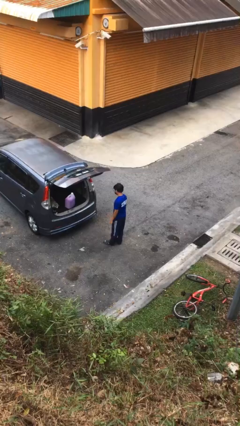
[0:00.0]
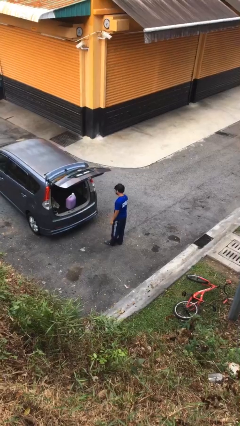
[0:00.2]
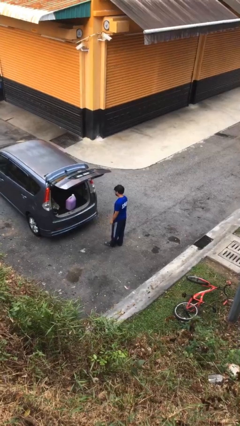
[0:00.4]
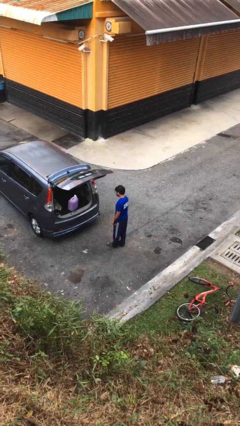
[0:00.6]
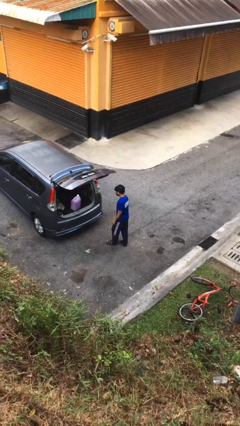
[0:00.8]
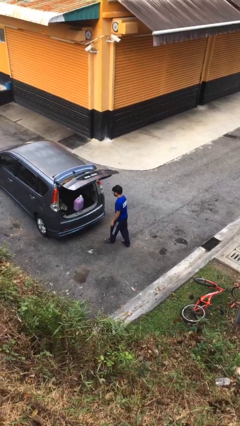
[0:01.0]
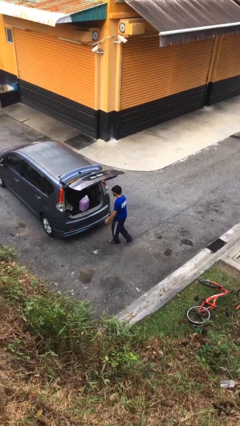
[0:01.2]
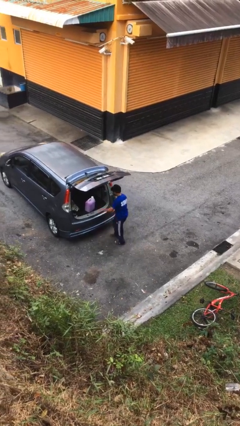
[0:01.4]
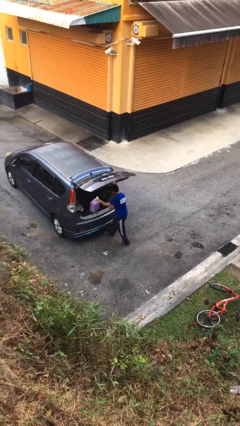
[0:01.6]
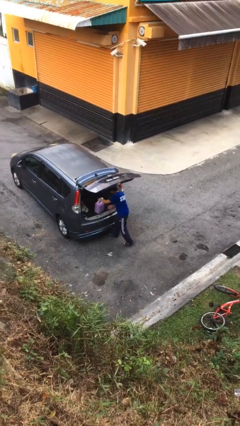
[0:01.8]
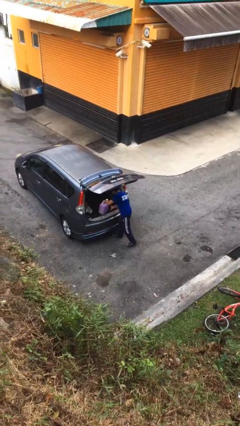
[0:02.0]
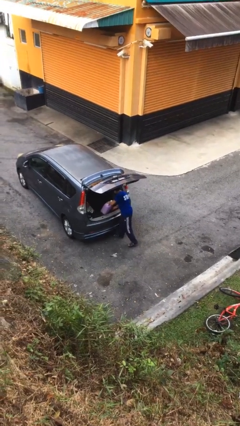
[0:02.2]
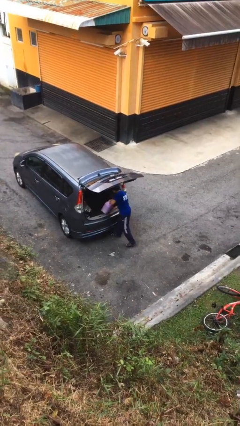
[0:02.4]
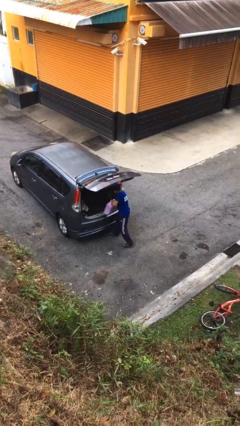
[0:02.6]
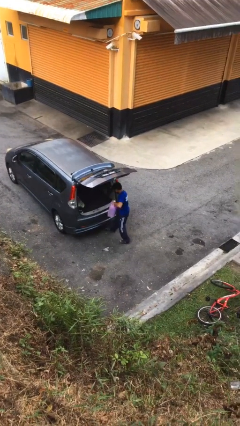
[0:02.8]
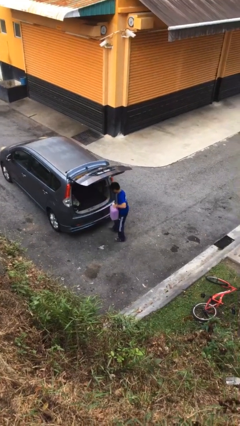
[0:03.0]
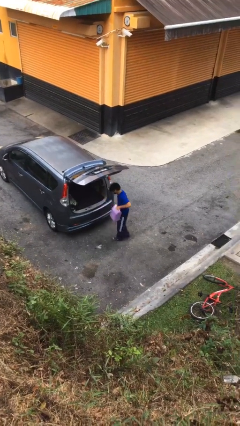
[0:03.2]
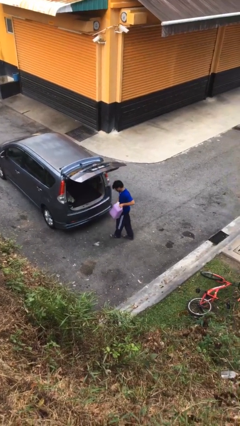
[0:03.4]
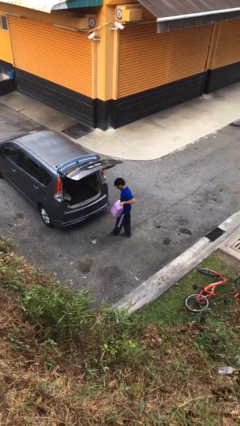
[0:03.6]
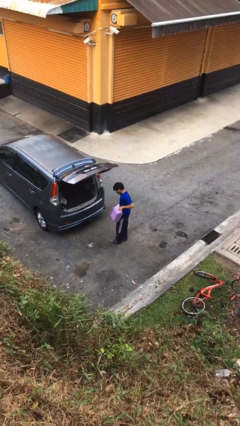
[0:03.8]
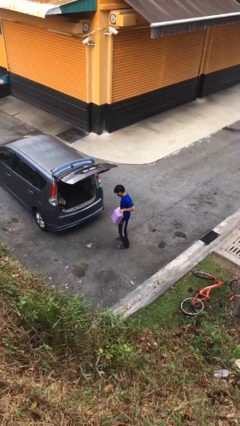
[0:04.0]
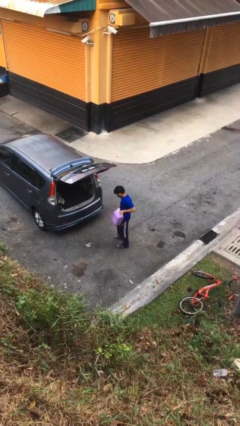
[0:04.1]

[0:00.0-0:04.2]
person unloads car

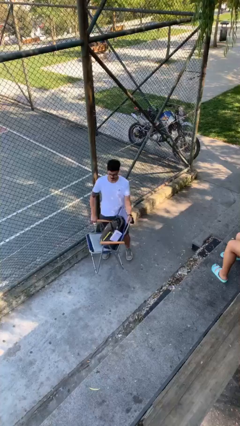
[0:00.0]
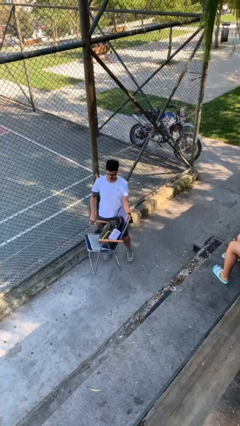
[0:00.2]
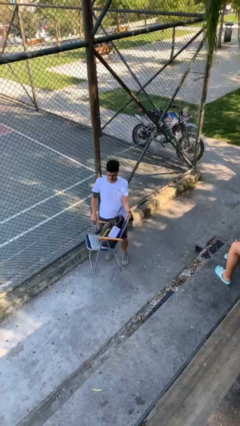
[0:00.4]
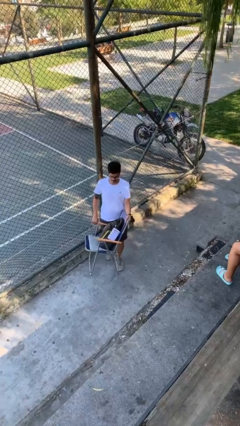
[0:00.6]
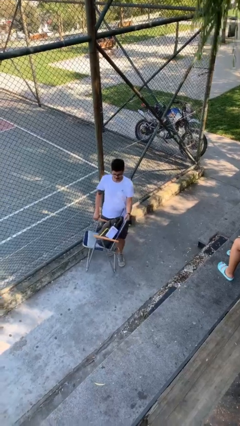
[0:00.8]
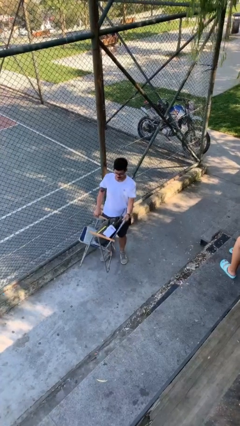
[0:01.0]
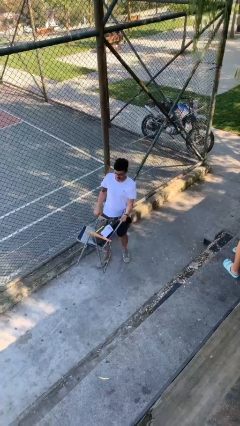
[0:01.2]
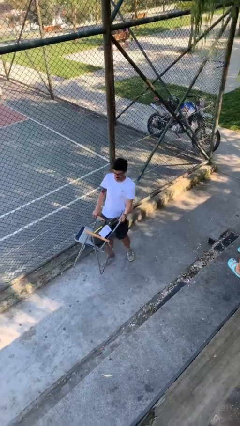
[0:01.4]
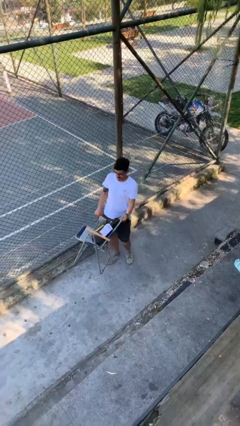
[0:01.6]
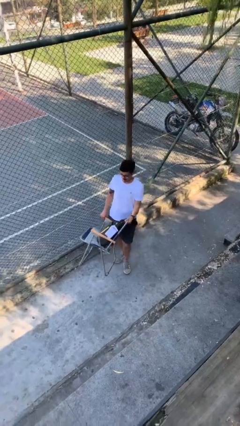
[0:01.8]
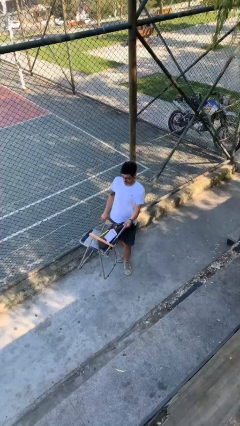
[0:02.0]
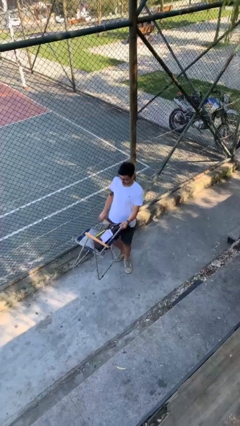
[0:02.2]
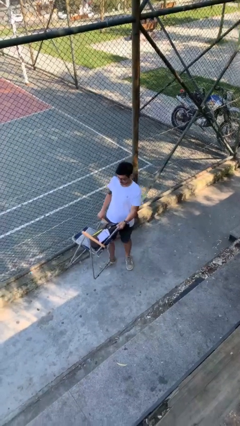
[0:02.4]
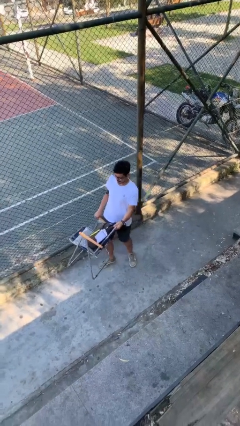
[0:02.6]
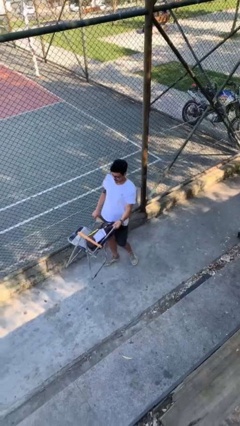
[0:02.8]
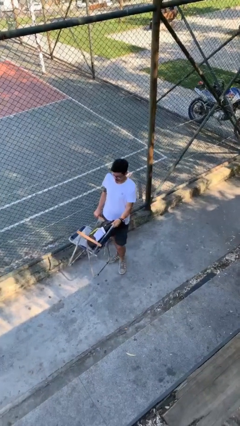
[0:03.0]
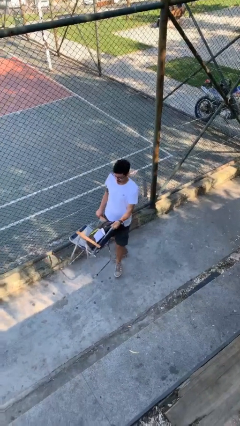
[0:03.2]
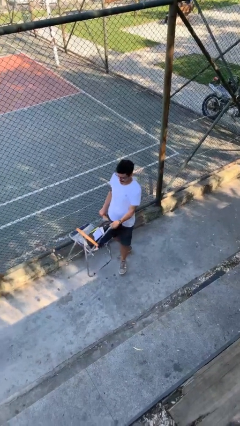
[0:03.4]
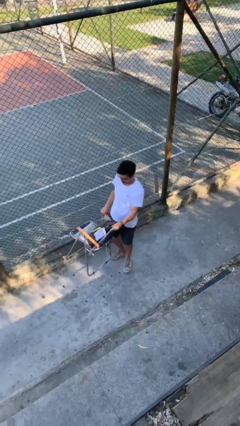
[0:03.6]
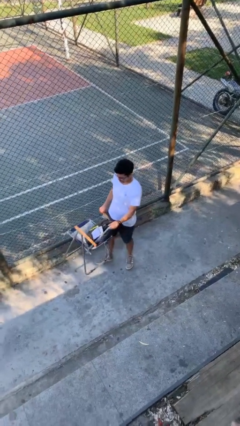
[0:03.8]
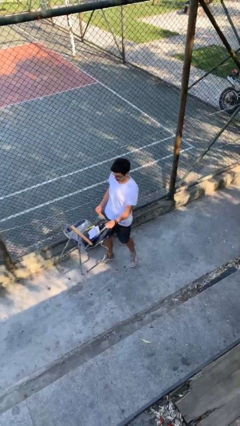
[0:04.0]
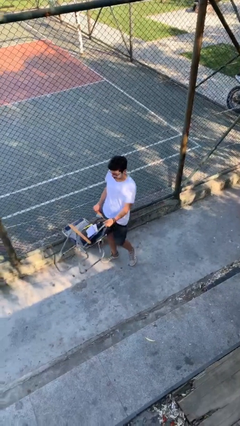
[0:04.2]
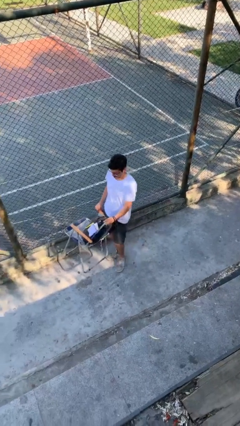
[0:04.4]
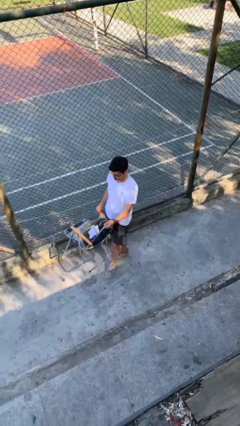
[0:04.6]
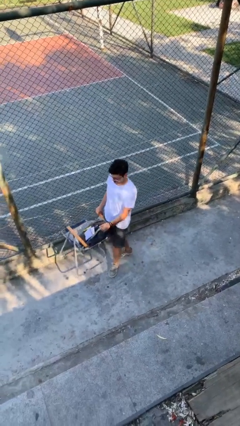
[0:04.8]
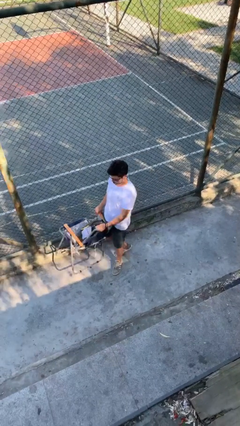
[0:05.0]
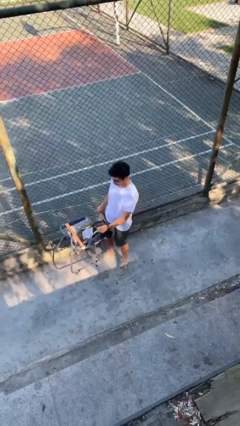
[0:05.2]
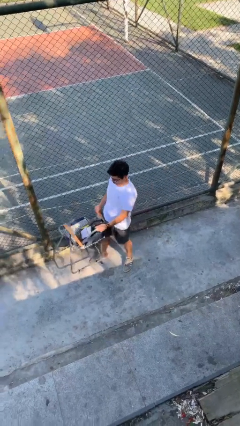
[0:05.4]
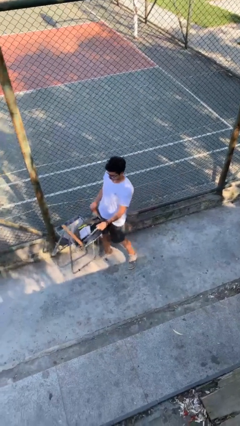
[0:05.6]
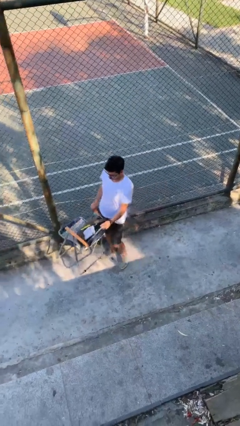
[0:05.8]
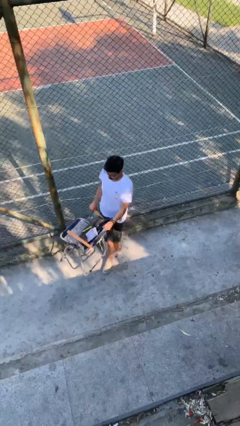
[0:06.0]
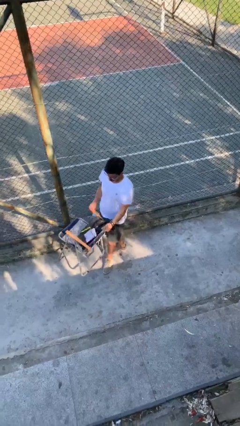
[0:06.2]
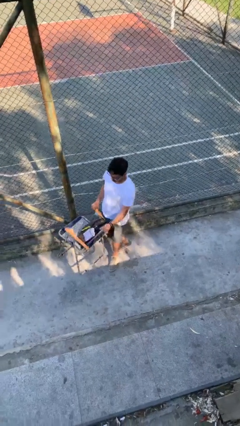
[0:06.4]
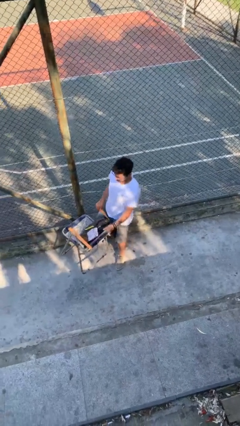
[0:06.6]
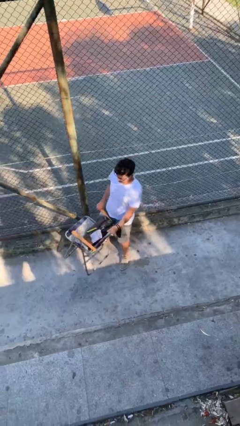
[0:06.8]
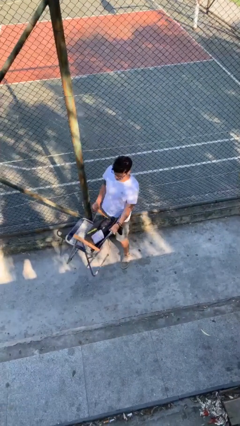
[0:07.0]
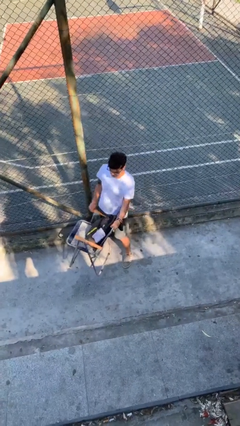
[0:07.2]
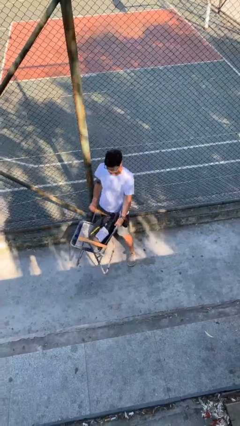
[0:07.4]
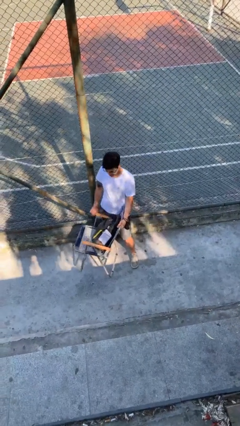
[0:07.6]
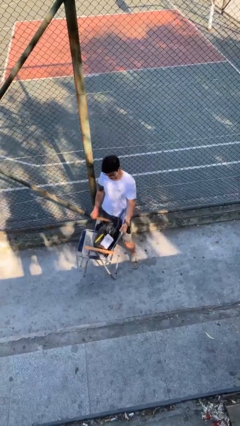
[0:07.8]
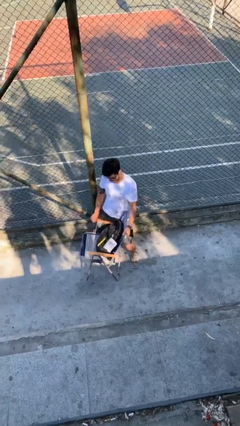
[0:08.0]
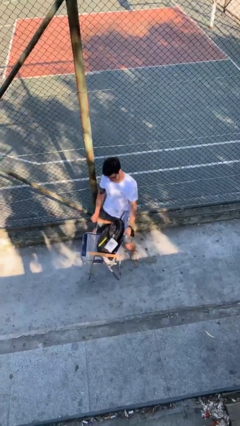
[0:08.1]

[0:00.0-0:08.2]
person carries heavy object

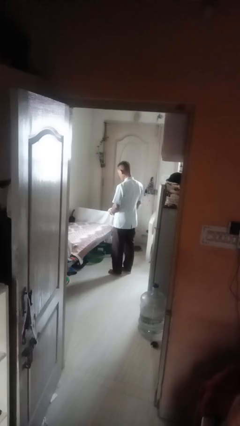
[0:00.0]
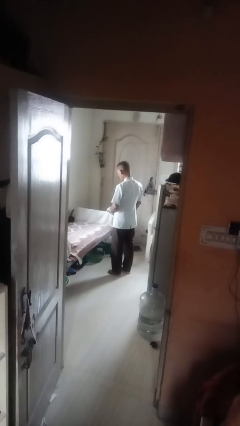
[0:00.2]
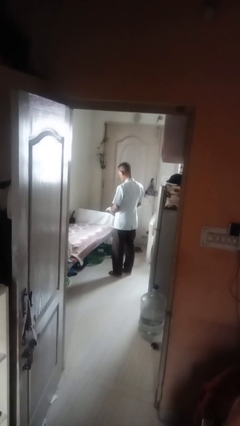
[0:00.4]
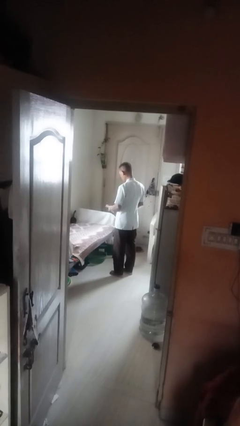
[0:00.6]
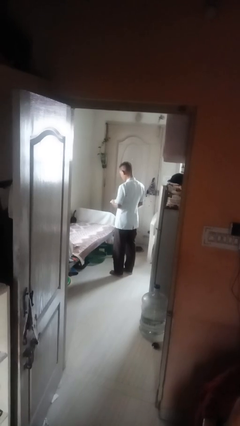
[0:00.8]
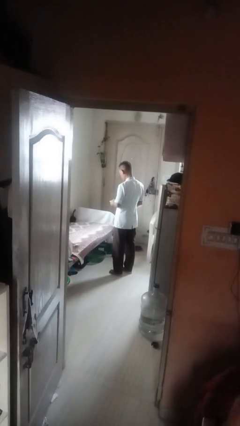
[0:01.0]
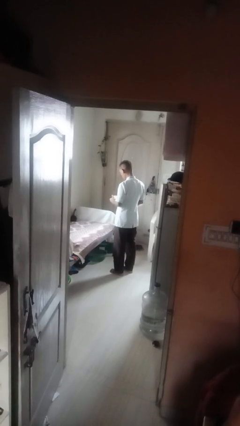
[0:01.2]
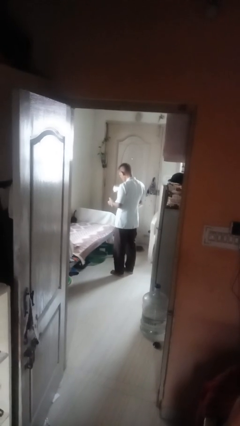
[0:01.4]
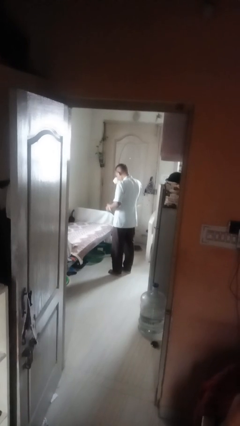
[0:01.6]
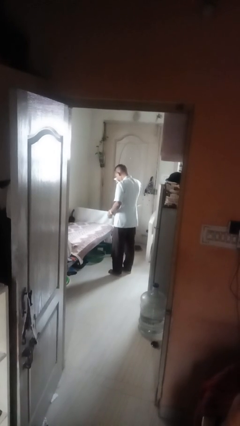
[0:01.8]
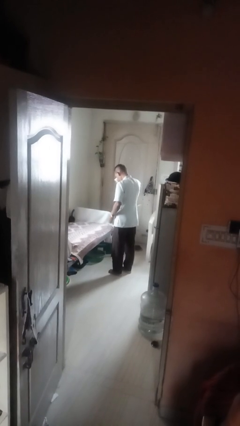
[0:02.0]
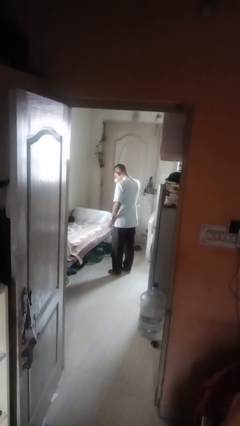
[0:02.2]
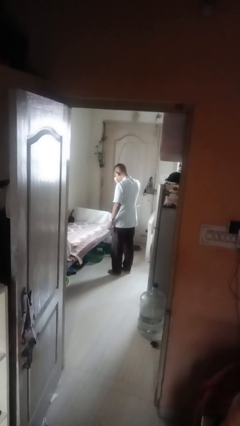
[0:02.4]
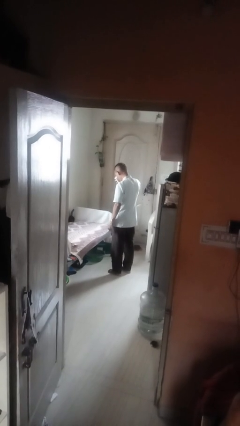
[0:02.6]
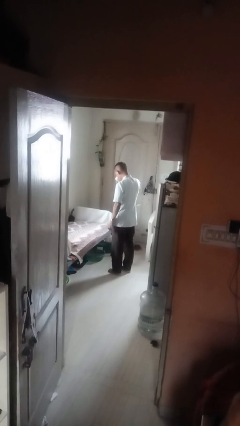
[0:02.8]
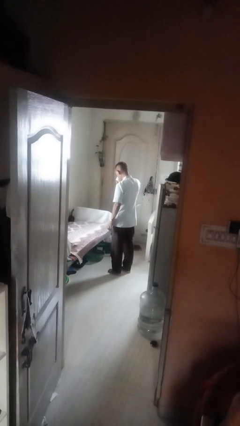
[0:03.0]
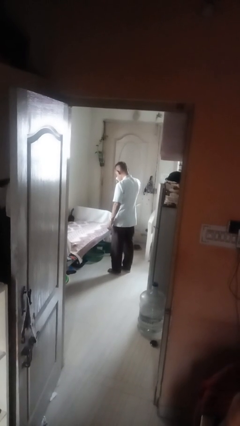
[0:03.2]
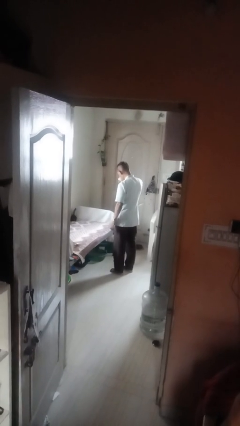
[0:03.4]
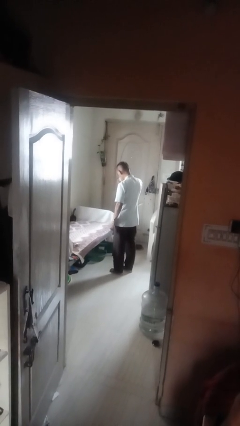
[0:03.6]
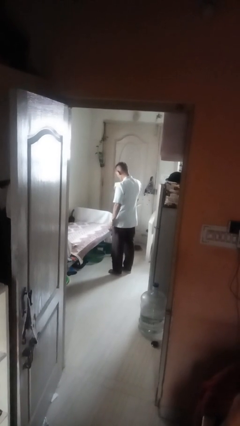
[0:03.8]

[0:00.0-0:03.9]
person blows nose

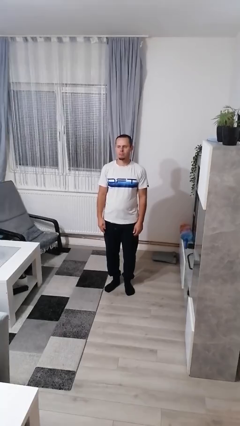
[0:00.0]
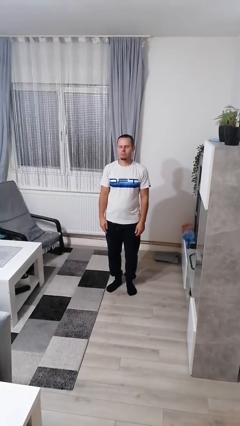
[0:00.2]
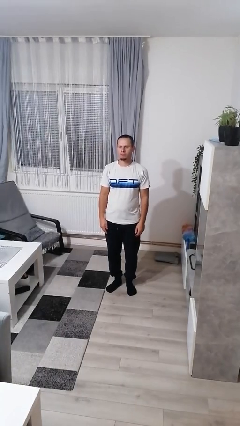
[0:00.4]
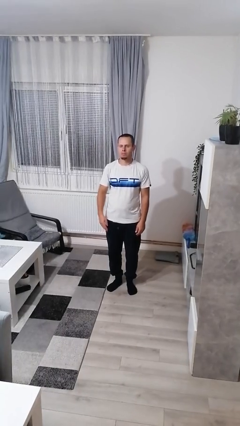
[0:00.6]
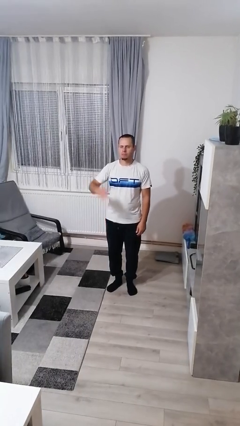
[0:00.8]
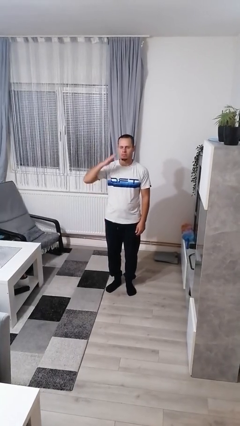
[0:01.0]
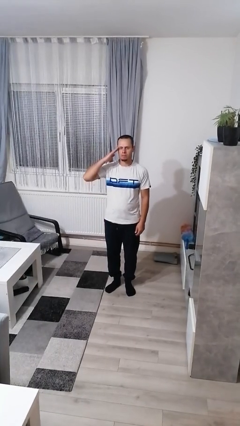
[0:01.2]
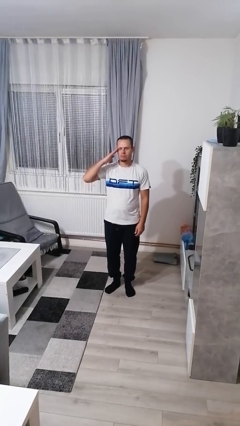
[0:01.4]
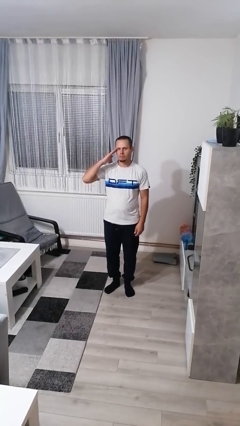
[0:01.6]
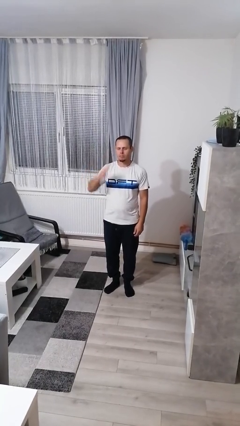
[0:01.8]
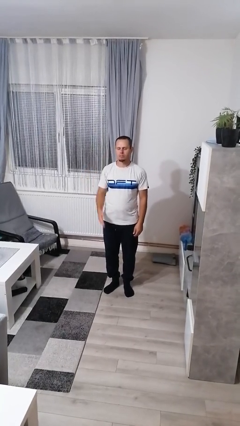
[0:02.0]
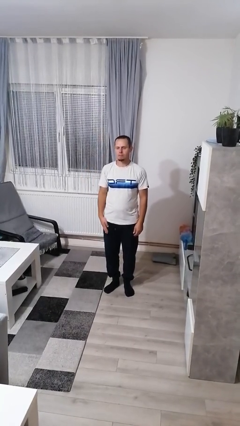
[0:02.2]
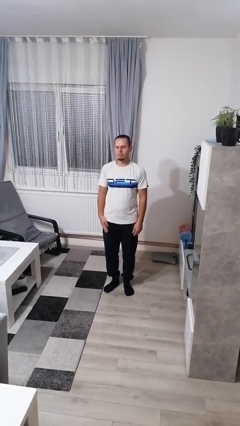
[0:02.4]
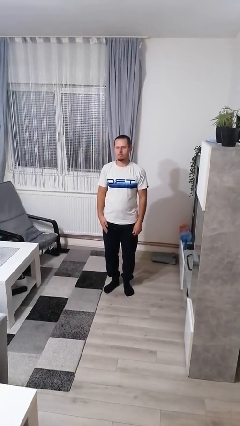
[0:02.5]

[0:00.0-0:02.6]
person salutes
